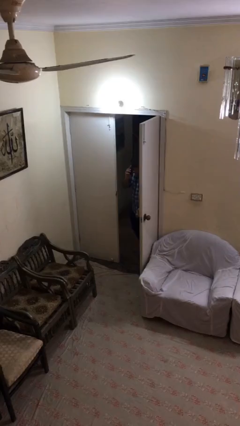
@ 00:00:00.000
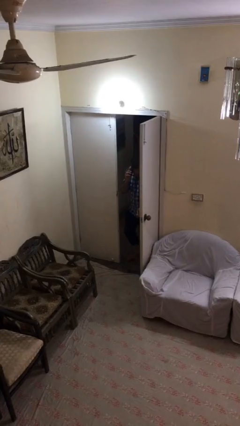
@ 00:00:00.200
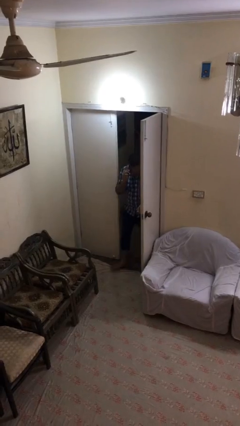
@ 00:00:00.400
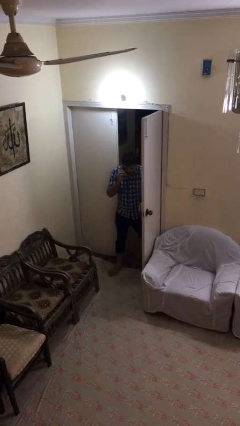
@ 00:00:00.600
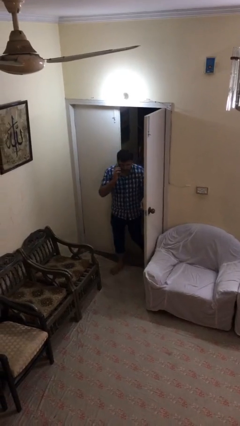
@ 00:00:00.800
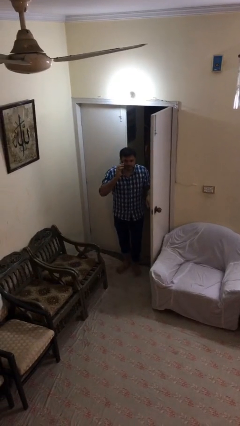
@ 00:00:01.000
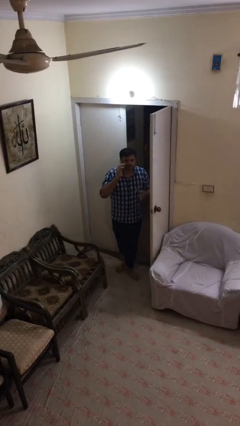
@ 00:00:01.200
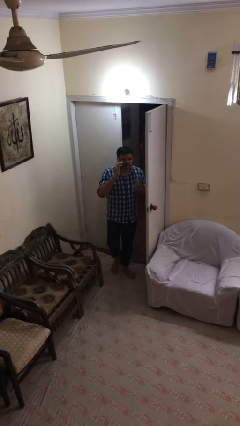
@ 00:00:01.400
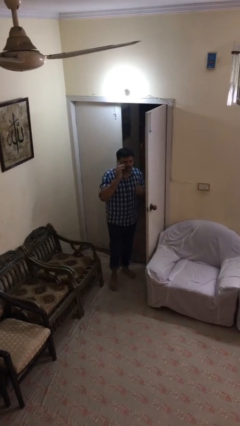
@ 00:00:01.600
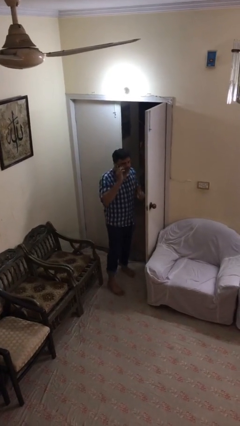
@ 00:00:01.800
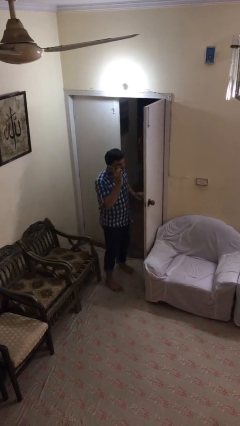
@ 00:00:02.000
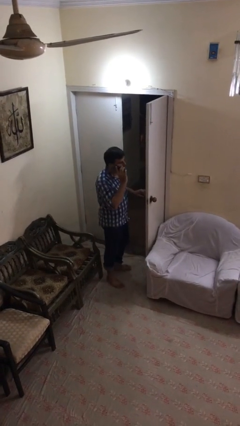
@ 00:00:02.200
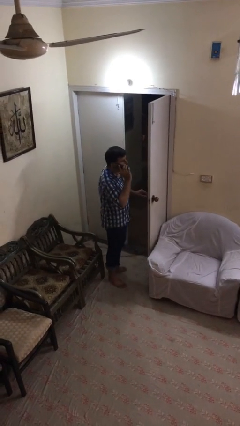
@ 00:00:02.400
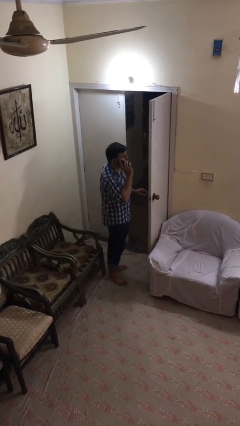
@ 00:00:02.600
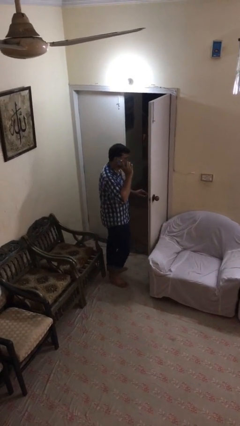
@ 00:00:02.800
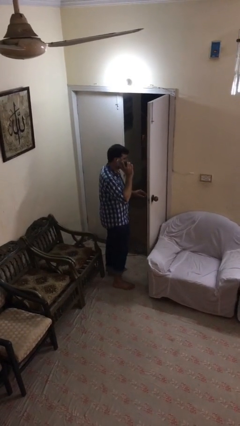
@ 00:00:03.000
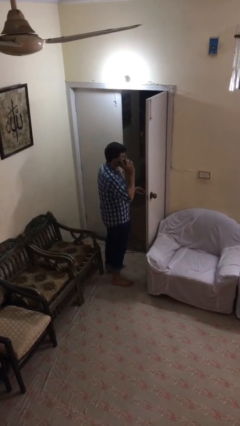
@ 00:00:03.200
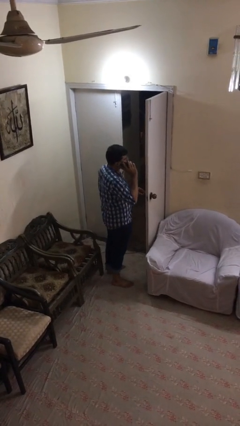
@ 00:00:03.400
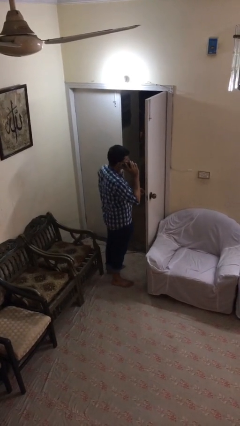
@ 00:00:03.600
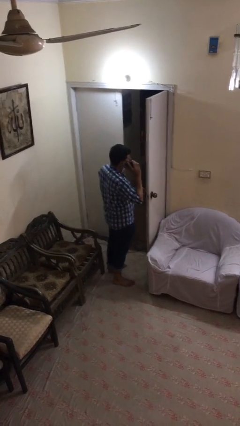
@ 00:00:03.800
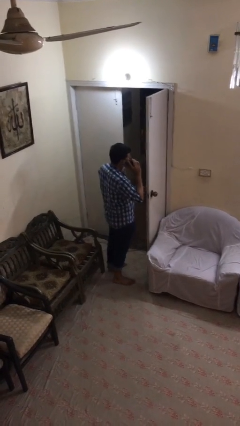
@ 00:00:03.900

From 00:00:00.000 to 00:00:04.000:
person enters scene through structure

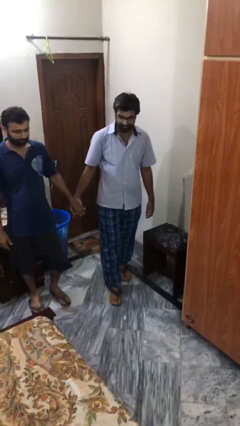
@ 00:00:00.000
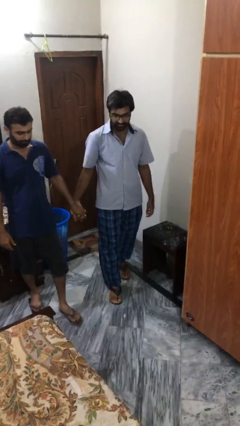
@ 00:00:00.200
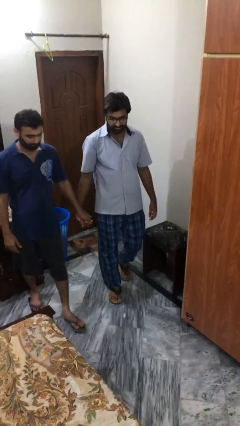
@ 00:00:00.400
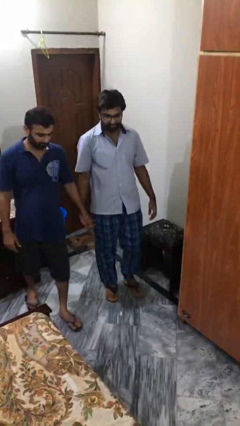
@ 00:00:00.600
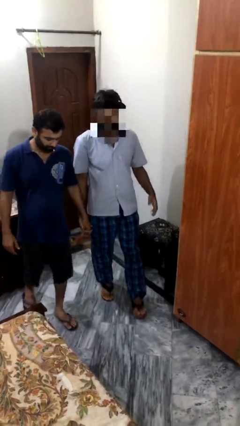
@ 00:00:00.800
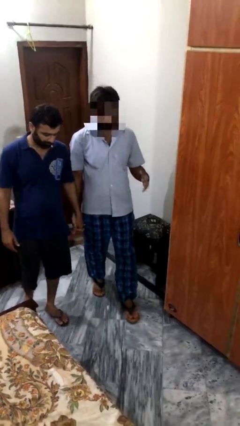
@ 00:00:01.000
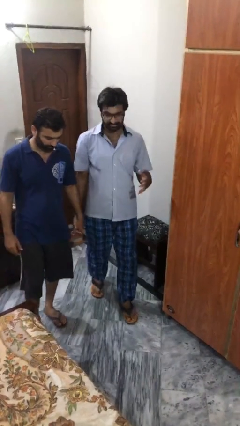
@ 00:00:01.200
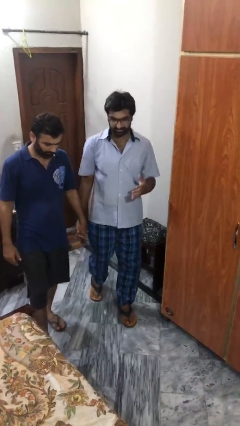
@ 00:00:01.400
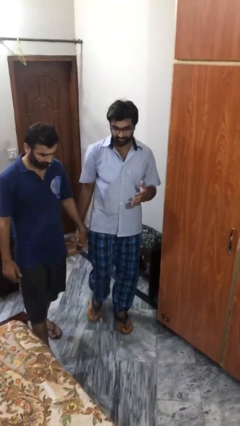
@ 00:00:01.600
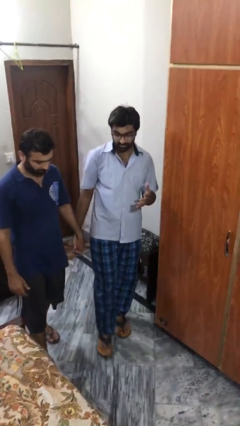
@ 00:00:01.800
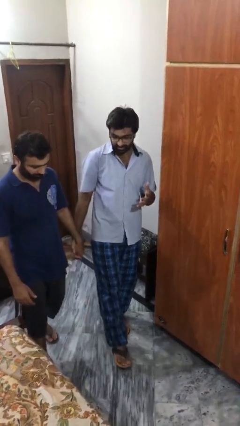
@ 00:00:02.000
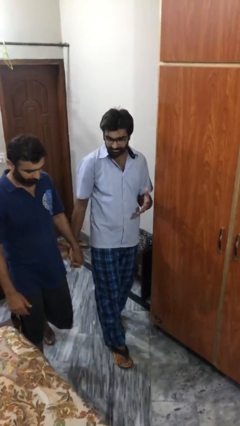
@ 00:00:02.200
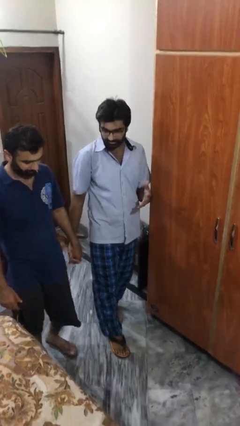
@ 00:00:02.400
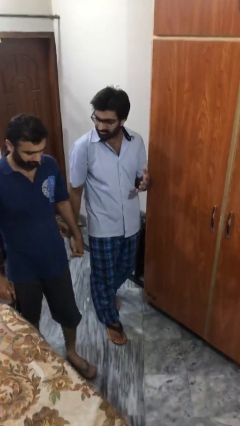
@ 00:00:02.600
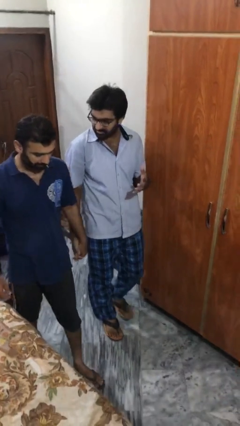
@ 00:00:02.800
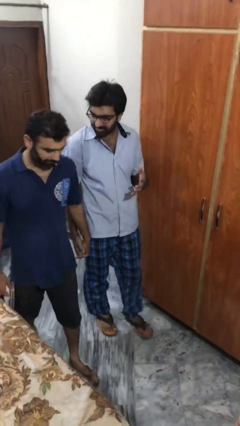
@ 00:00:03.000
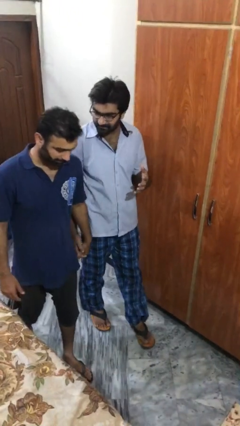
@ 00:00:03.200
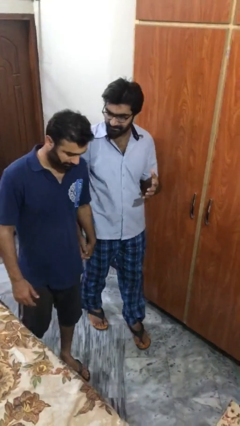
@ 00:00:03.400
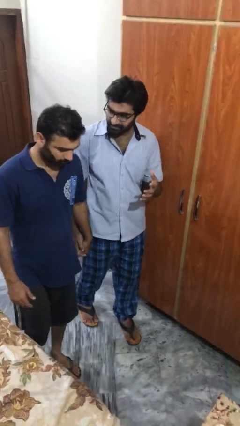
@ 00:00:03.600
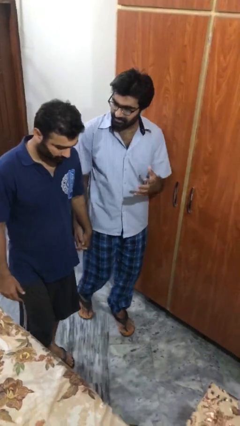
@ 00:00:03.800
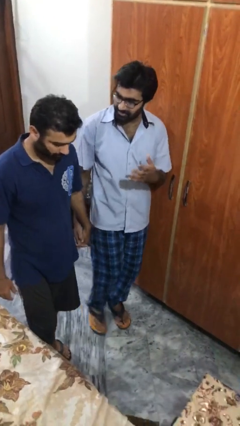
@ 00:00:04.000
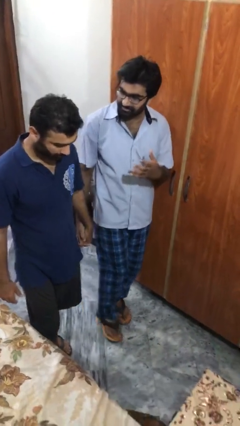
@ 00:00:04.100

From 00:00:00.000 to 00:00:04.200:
person holds hand

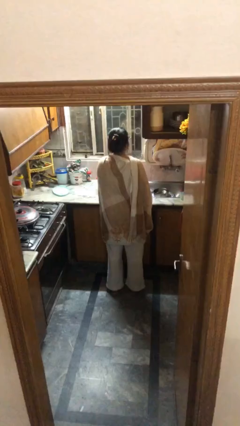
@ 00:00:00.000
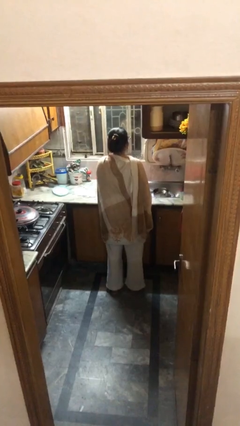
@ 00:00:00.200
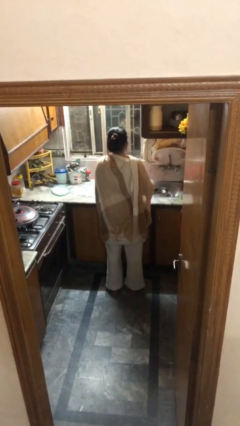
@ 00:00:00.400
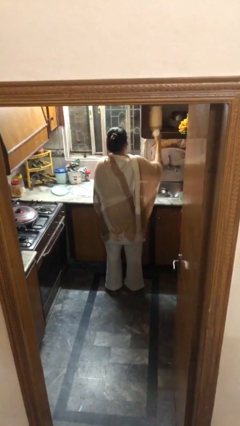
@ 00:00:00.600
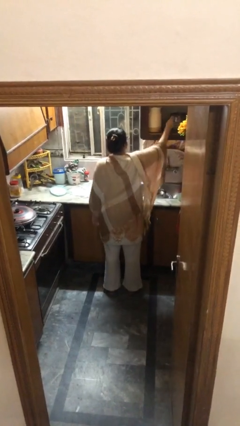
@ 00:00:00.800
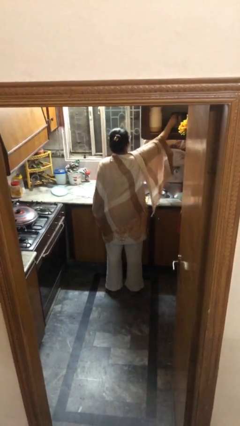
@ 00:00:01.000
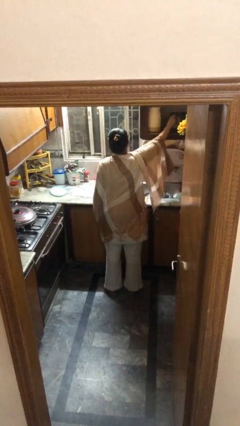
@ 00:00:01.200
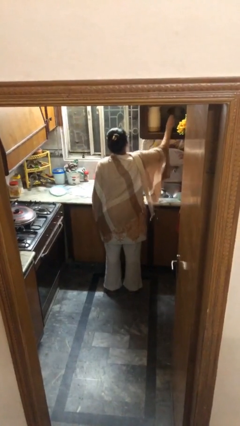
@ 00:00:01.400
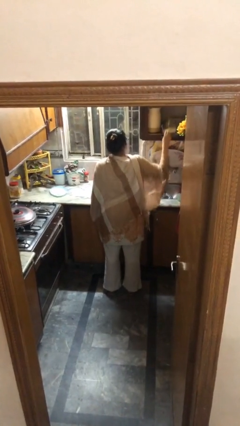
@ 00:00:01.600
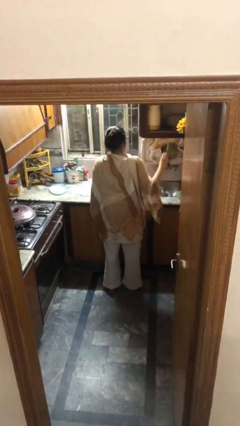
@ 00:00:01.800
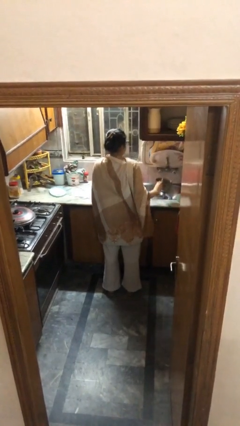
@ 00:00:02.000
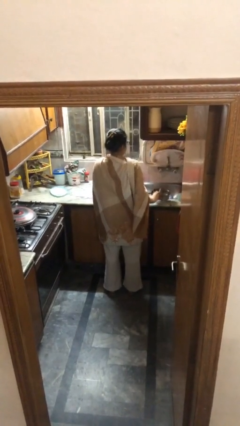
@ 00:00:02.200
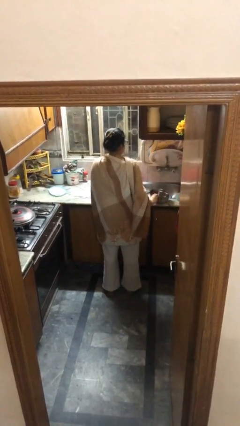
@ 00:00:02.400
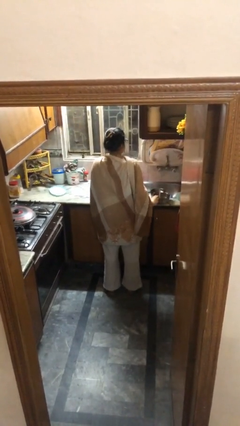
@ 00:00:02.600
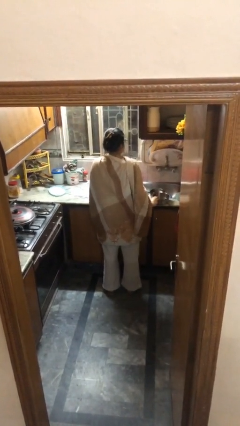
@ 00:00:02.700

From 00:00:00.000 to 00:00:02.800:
person takes object from cabinet

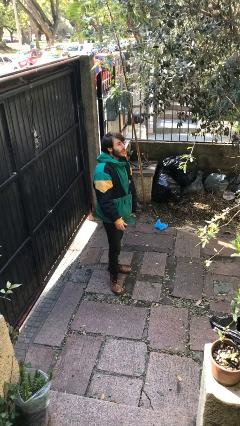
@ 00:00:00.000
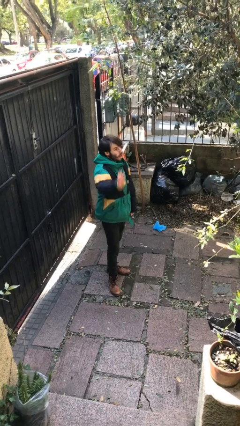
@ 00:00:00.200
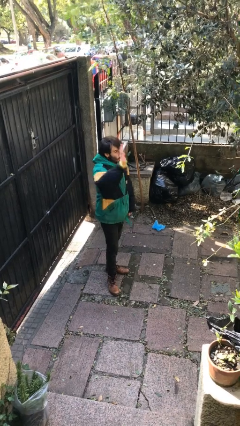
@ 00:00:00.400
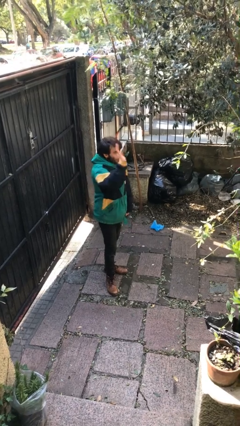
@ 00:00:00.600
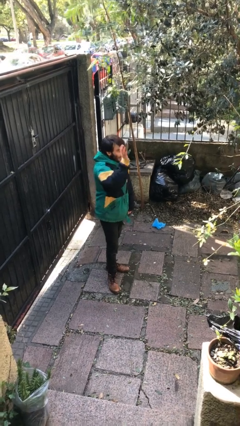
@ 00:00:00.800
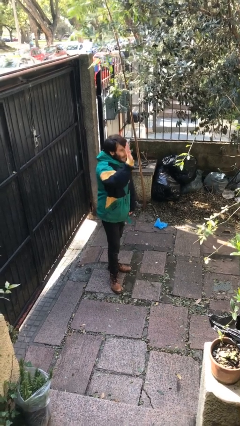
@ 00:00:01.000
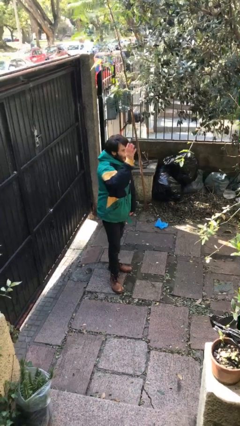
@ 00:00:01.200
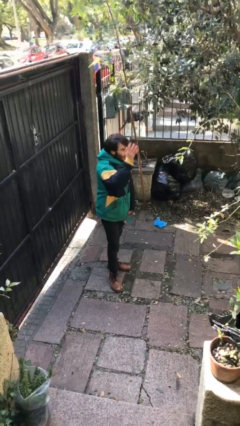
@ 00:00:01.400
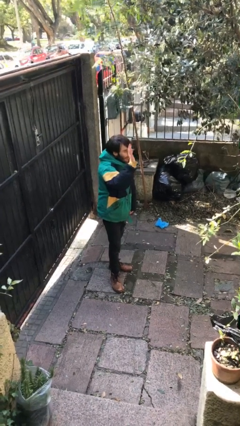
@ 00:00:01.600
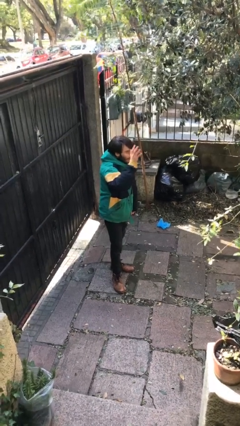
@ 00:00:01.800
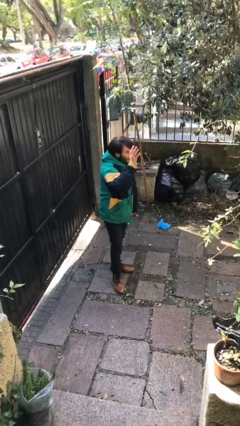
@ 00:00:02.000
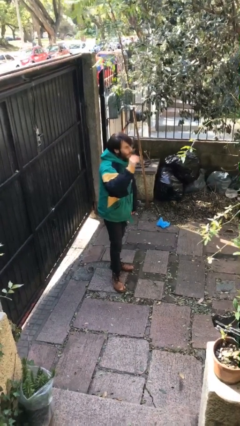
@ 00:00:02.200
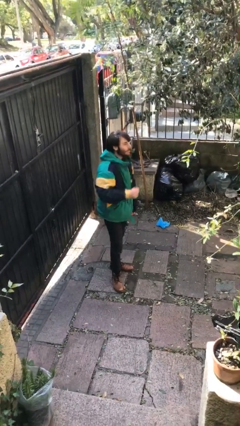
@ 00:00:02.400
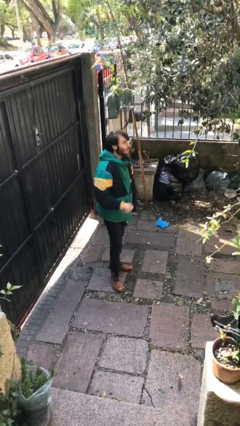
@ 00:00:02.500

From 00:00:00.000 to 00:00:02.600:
person waves at person

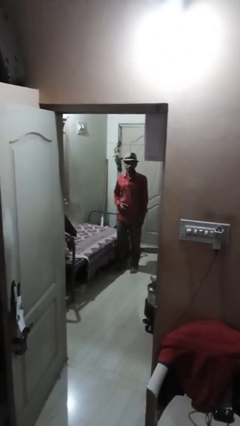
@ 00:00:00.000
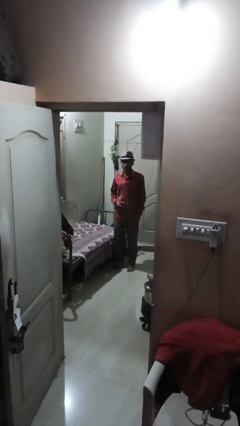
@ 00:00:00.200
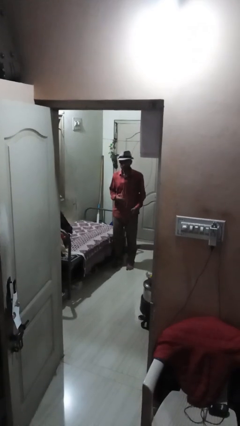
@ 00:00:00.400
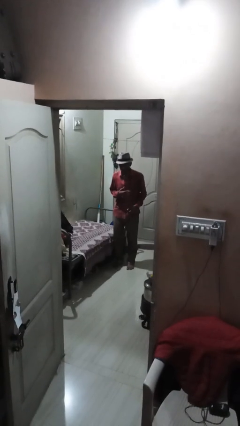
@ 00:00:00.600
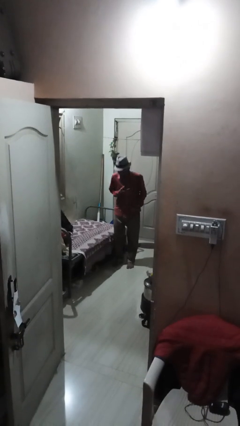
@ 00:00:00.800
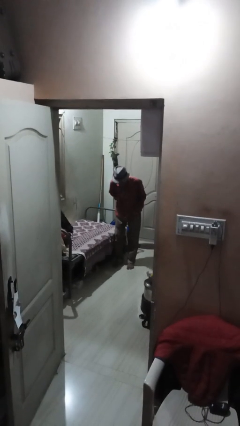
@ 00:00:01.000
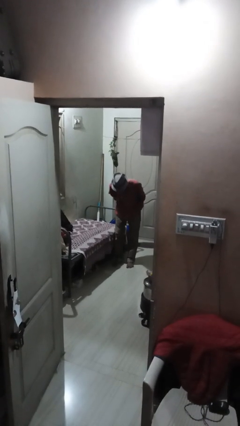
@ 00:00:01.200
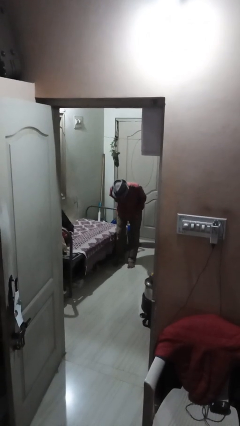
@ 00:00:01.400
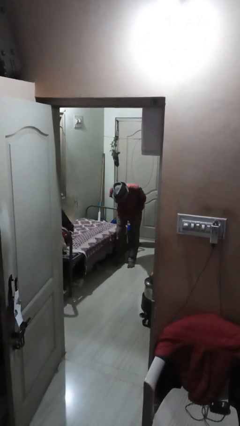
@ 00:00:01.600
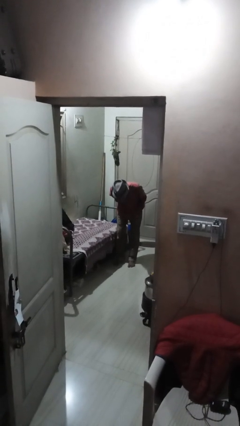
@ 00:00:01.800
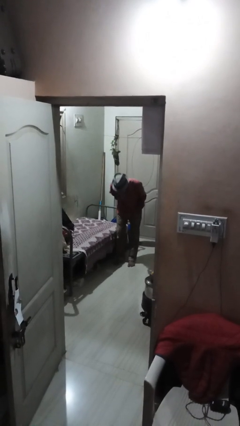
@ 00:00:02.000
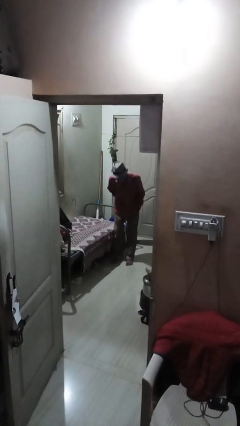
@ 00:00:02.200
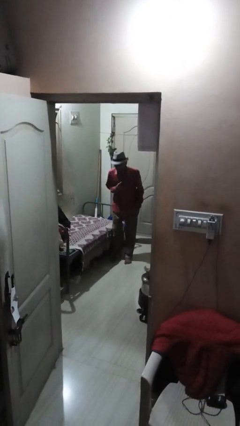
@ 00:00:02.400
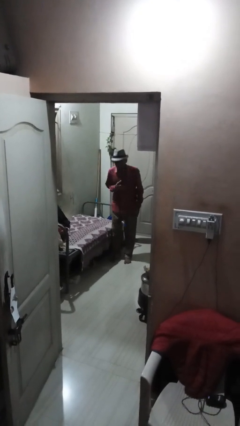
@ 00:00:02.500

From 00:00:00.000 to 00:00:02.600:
person bows

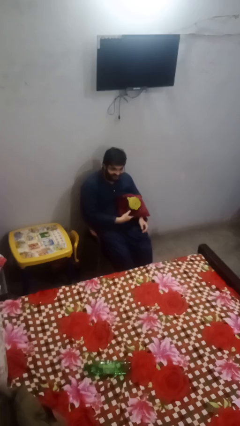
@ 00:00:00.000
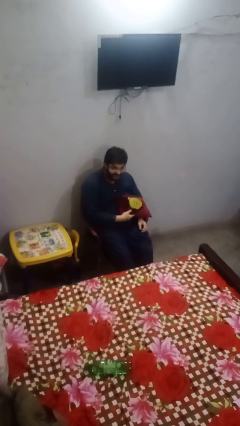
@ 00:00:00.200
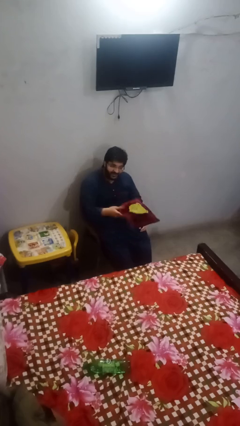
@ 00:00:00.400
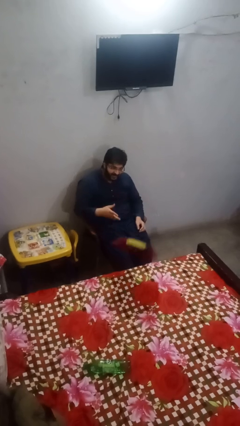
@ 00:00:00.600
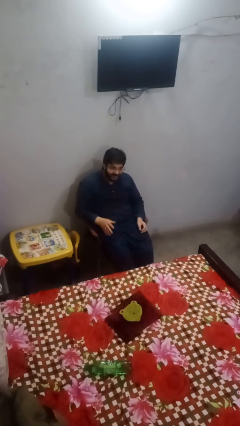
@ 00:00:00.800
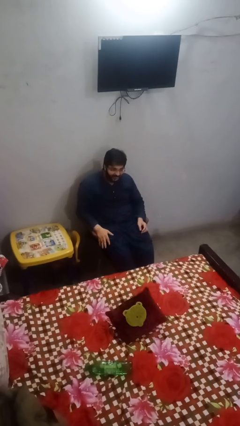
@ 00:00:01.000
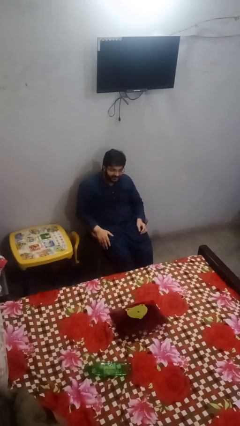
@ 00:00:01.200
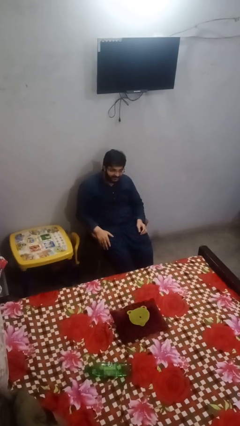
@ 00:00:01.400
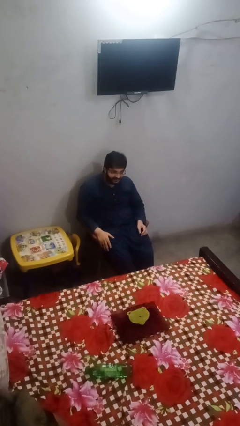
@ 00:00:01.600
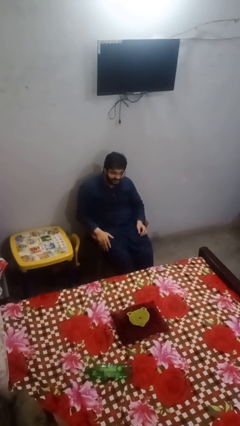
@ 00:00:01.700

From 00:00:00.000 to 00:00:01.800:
person throws object on bed
